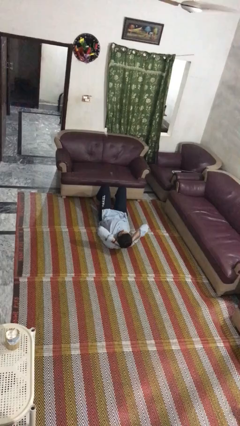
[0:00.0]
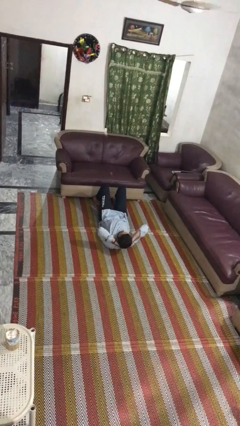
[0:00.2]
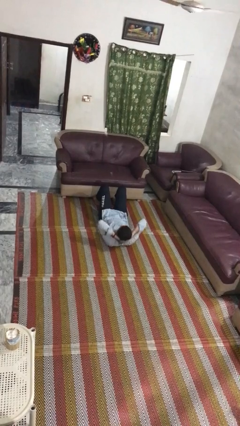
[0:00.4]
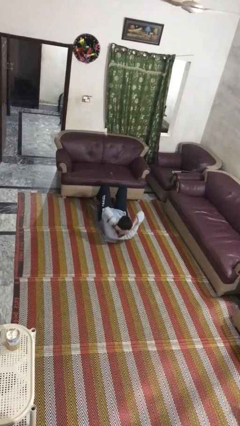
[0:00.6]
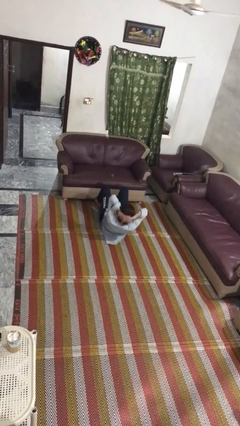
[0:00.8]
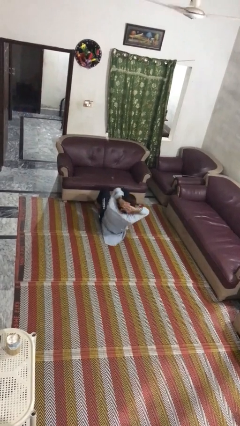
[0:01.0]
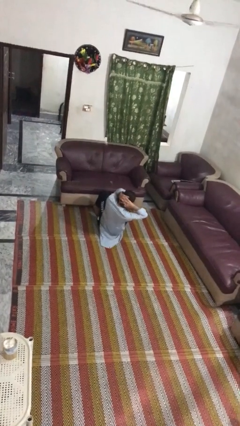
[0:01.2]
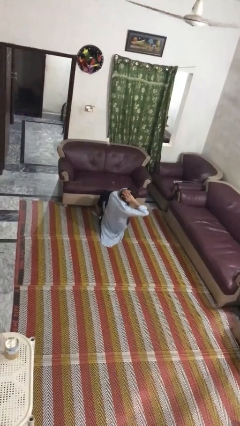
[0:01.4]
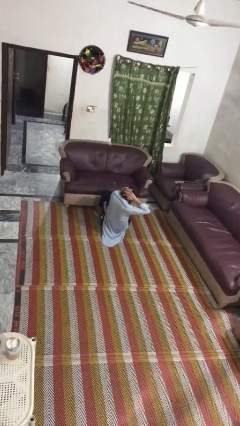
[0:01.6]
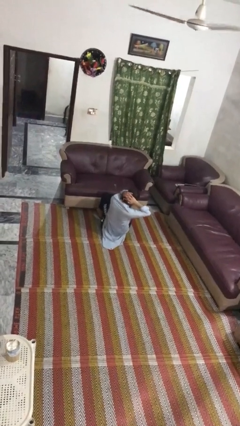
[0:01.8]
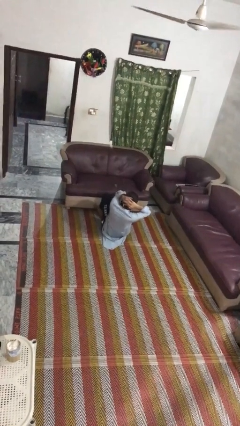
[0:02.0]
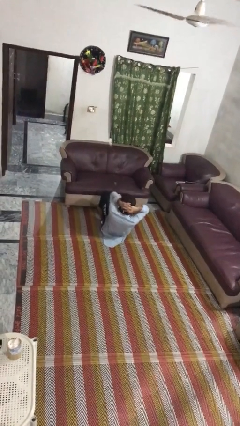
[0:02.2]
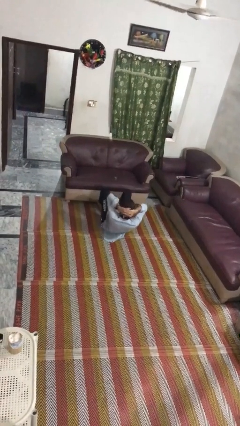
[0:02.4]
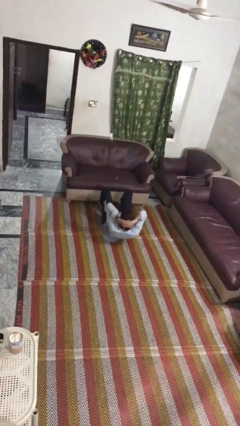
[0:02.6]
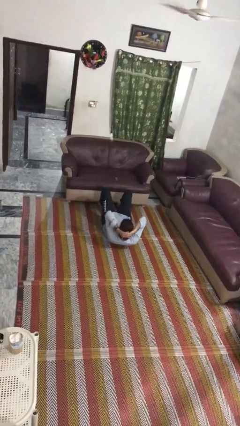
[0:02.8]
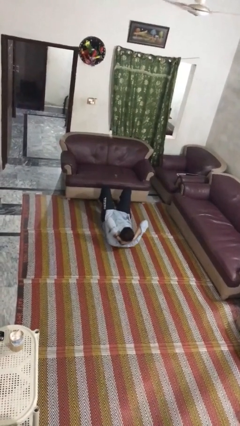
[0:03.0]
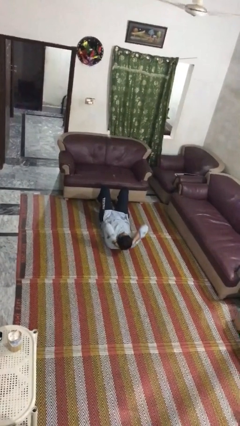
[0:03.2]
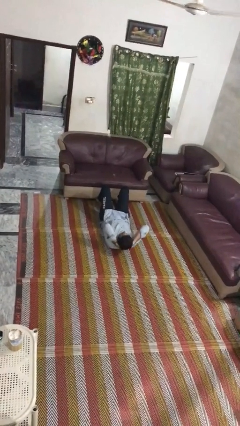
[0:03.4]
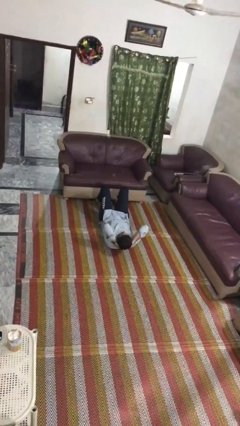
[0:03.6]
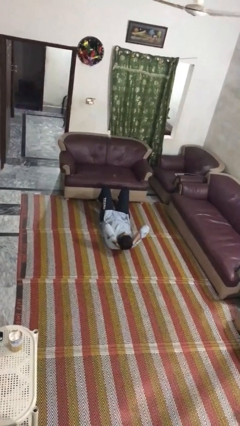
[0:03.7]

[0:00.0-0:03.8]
person exercises with situp

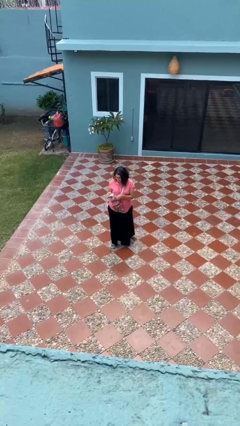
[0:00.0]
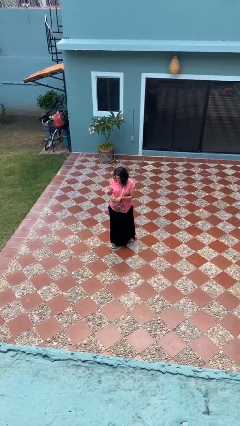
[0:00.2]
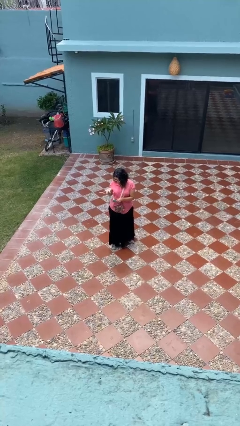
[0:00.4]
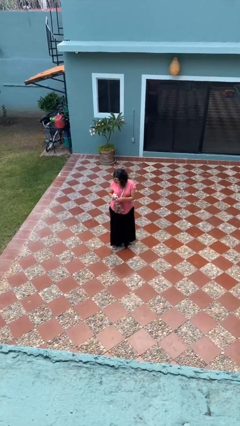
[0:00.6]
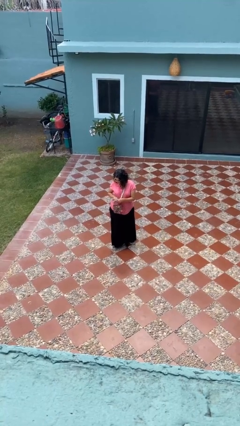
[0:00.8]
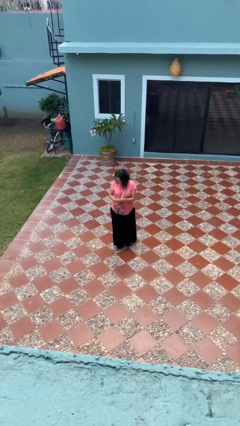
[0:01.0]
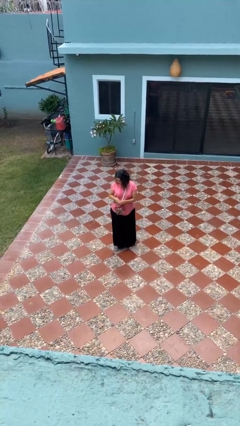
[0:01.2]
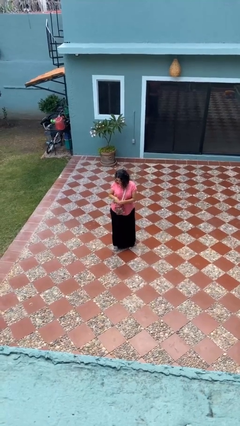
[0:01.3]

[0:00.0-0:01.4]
person puts object into purse

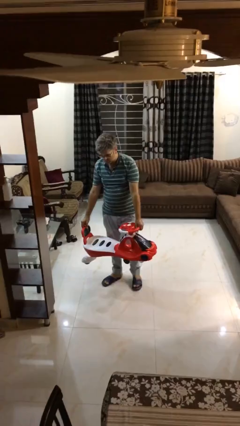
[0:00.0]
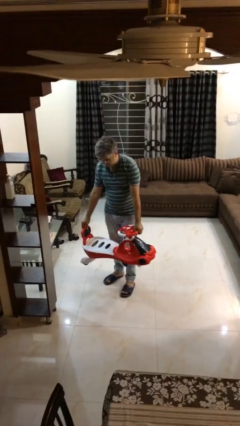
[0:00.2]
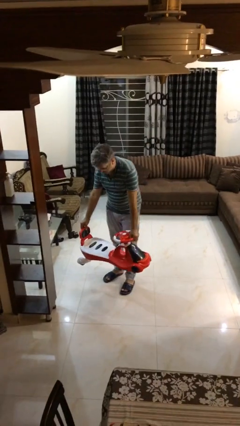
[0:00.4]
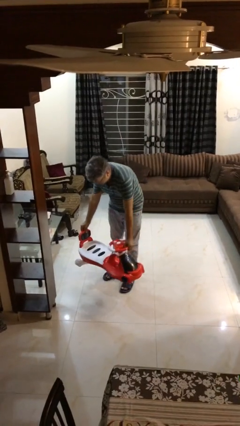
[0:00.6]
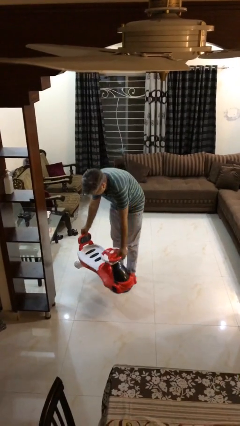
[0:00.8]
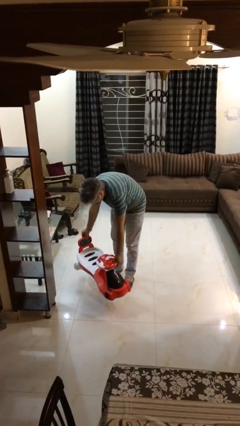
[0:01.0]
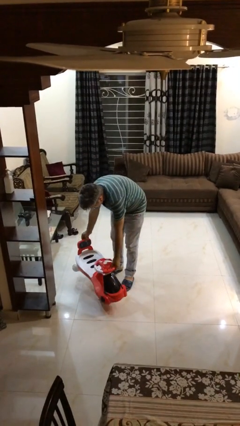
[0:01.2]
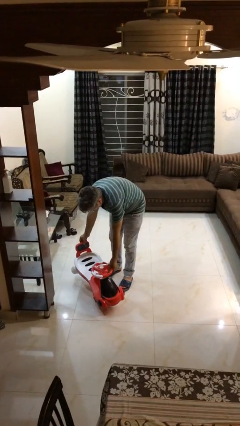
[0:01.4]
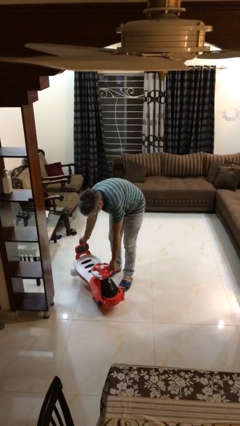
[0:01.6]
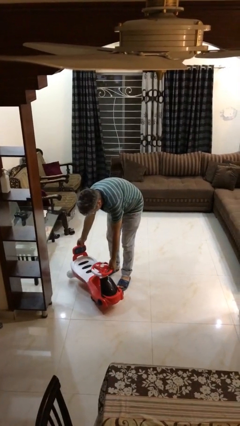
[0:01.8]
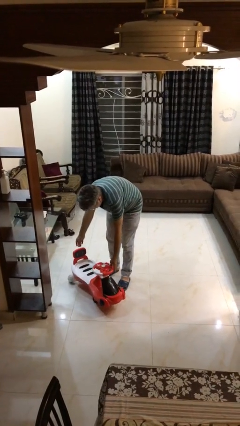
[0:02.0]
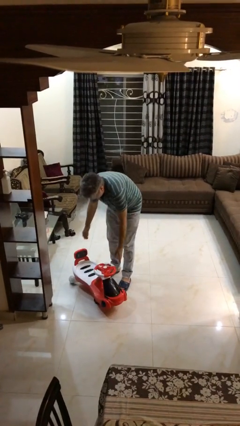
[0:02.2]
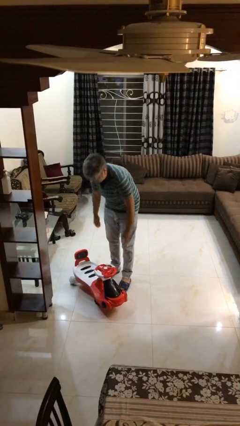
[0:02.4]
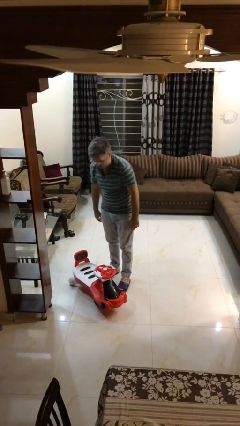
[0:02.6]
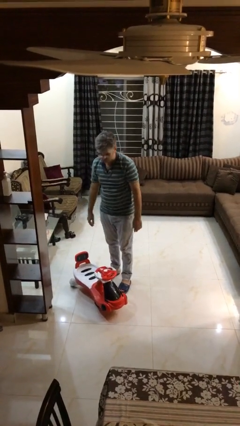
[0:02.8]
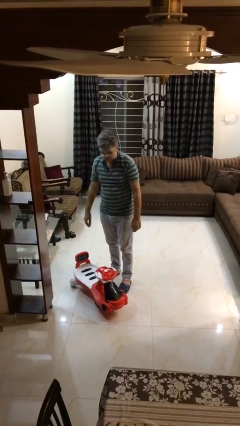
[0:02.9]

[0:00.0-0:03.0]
person puts down object on floor

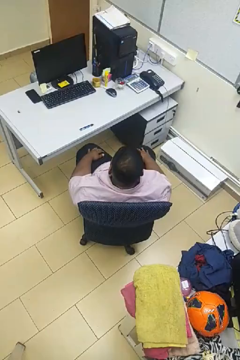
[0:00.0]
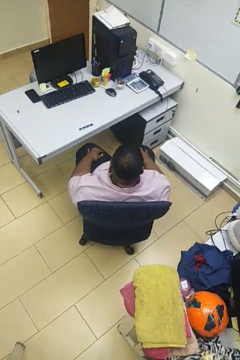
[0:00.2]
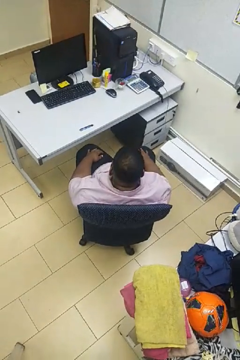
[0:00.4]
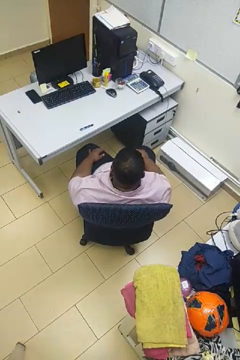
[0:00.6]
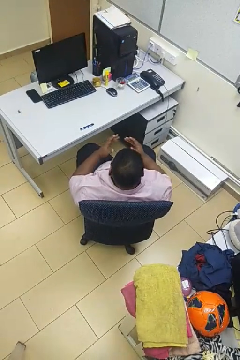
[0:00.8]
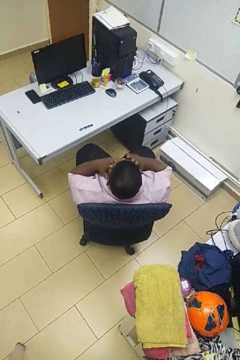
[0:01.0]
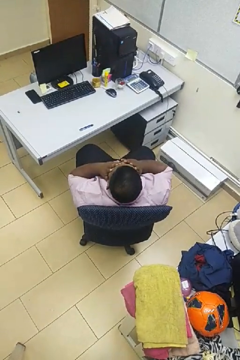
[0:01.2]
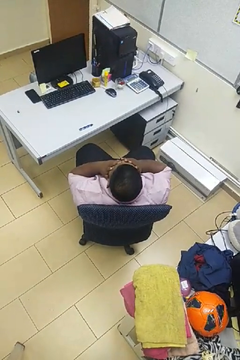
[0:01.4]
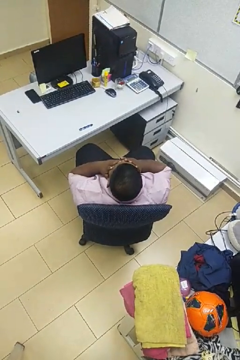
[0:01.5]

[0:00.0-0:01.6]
person covers face with hands

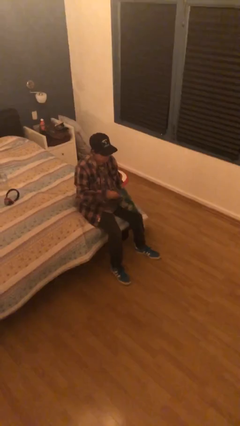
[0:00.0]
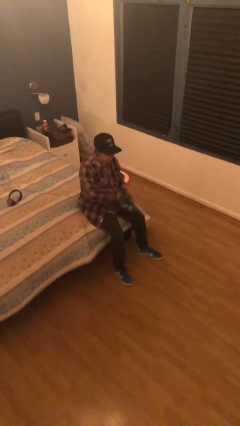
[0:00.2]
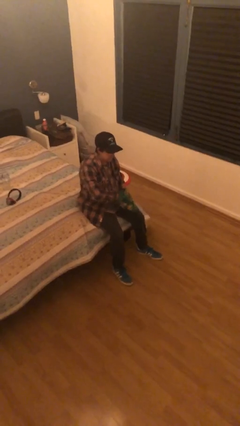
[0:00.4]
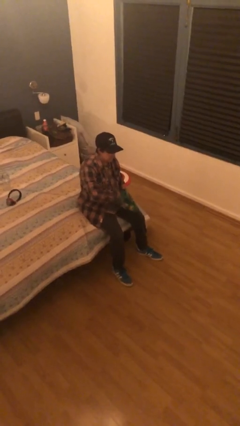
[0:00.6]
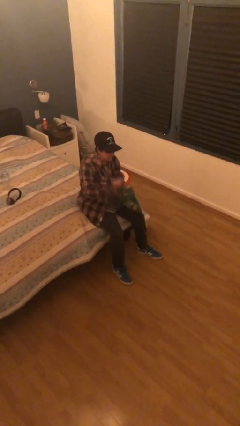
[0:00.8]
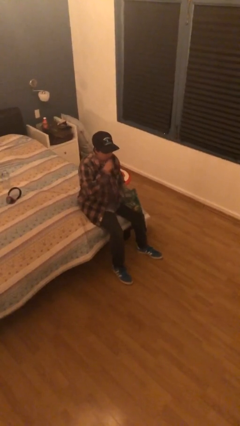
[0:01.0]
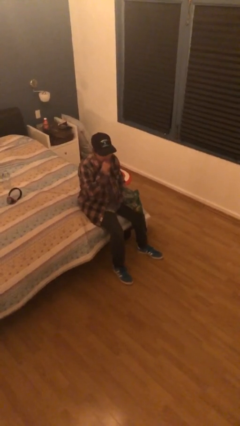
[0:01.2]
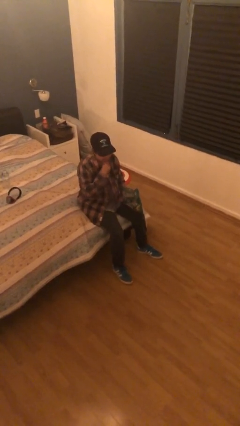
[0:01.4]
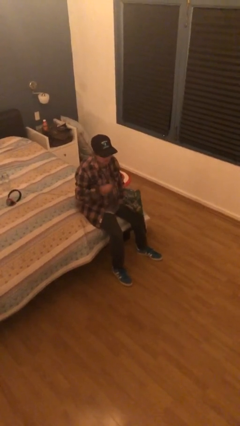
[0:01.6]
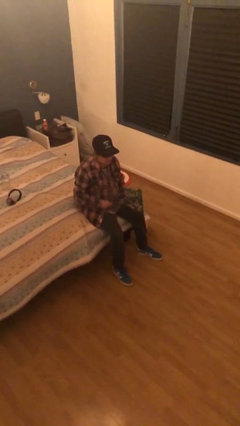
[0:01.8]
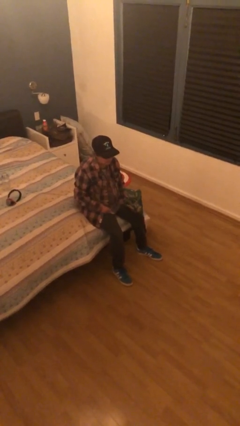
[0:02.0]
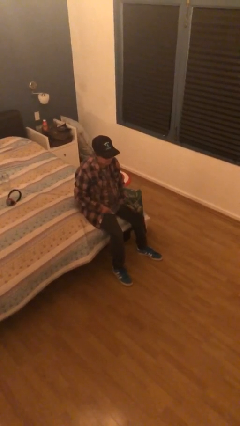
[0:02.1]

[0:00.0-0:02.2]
person eats snack from bag

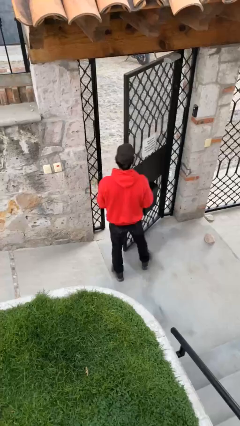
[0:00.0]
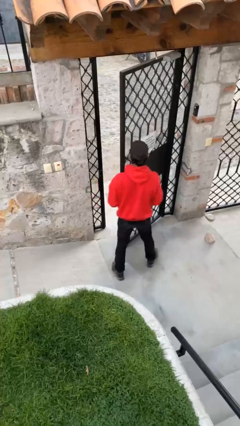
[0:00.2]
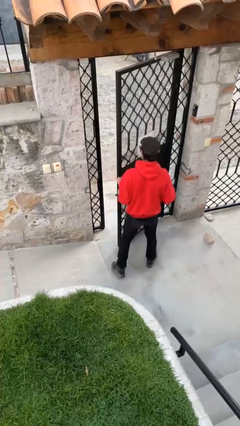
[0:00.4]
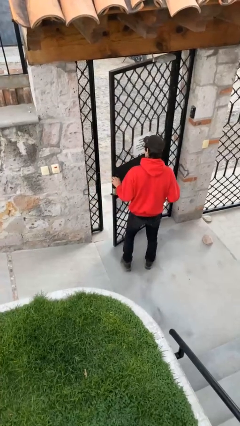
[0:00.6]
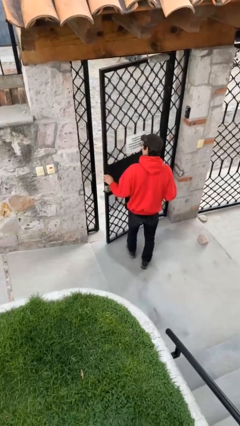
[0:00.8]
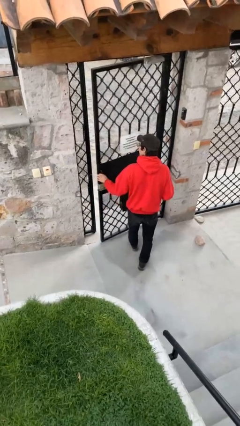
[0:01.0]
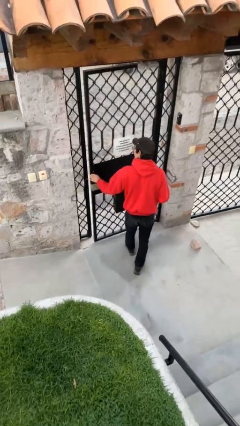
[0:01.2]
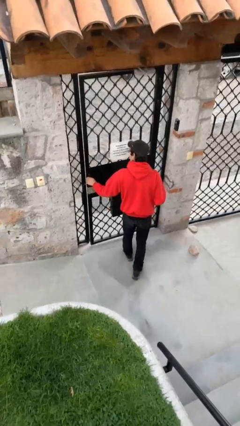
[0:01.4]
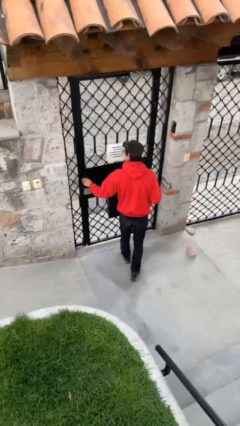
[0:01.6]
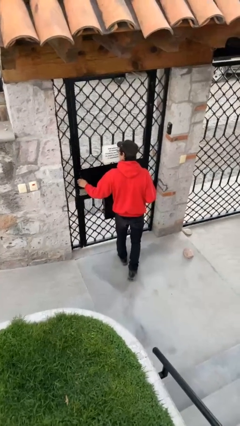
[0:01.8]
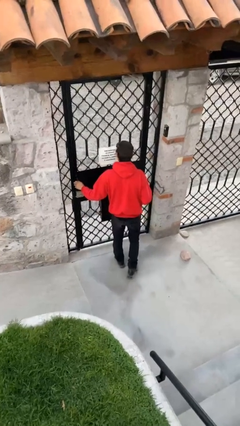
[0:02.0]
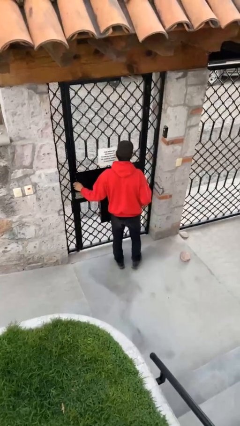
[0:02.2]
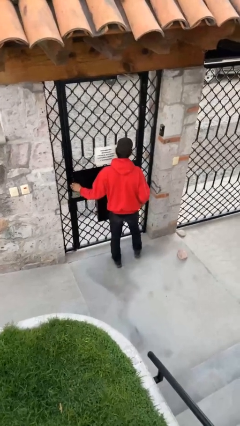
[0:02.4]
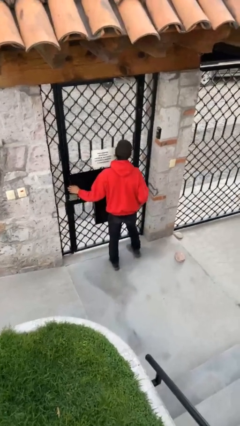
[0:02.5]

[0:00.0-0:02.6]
person closes facility door

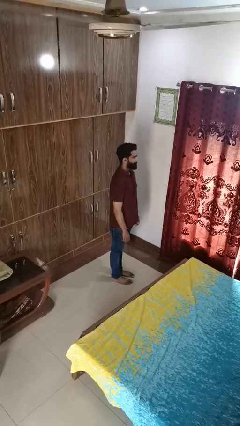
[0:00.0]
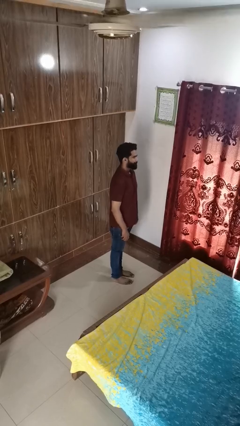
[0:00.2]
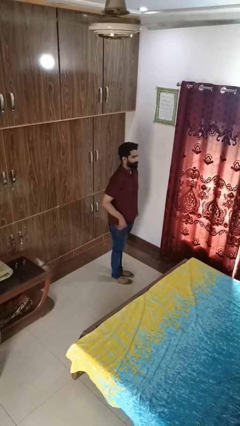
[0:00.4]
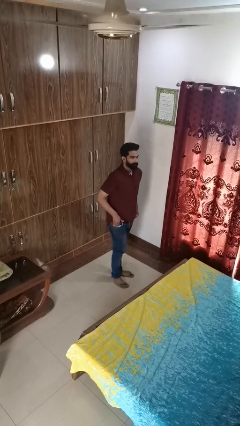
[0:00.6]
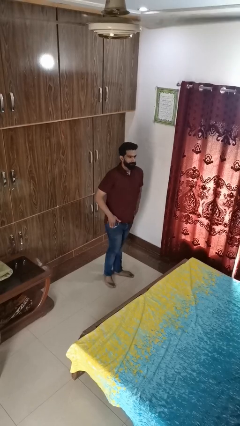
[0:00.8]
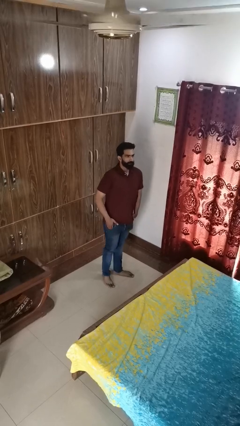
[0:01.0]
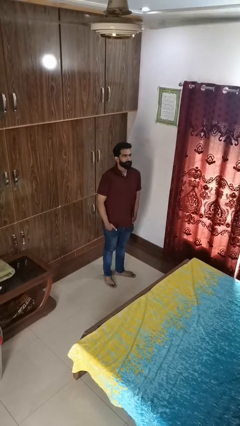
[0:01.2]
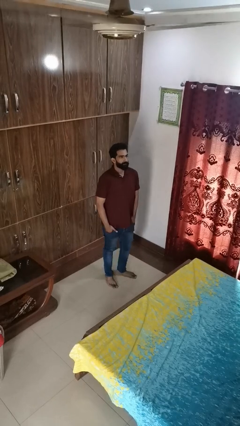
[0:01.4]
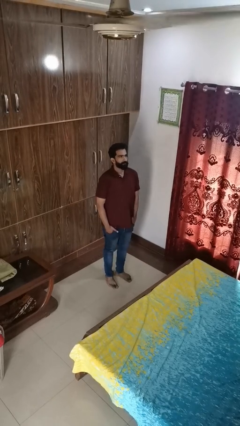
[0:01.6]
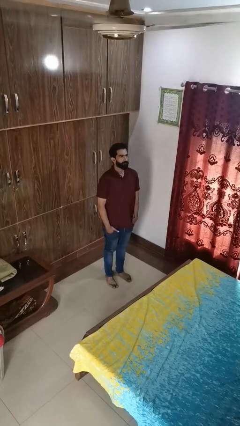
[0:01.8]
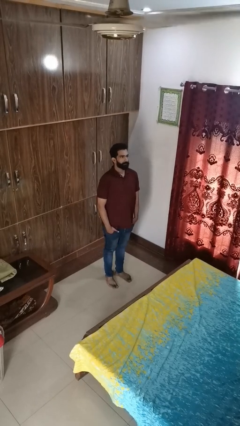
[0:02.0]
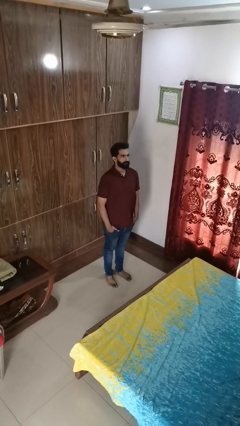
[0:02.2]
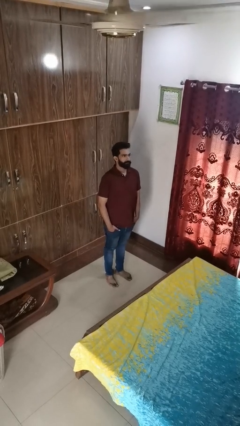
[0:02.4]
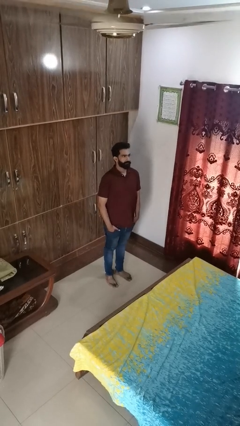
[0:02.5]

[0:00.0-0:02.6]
person puts hands in back pockets

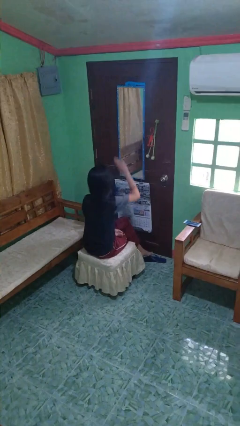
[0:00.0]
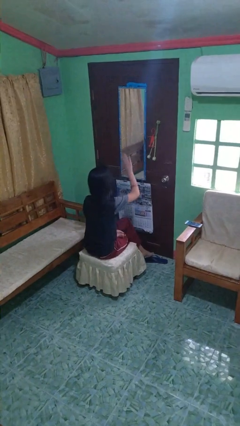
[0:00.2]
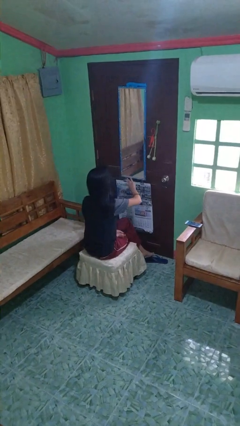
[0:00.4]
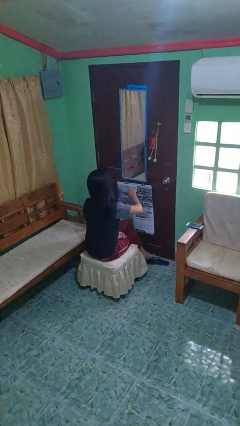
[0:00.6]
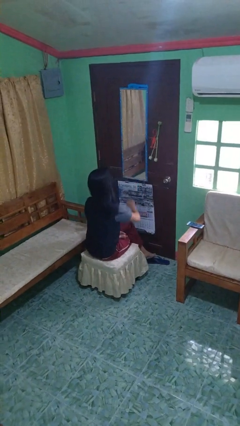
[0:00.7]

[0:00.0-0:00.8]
person gestures swipe up
